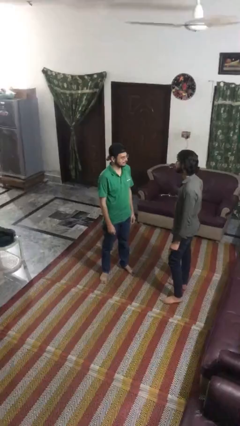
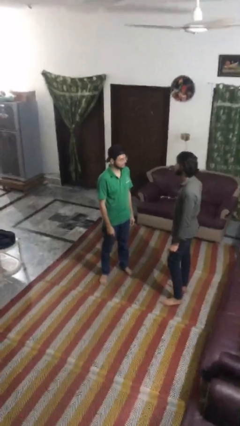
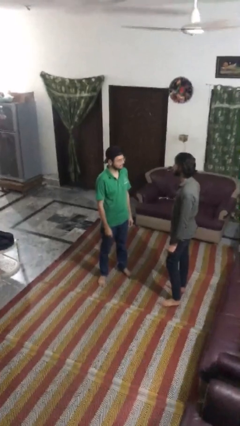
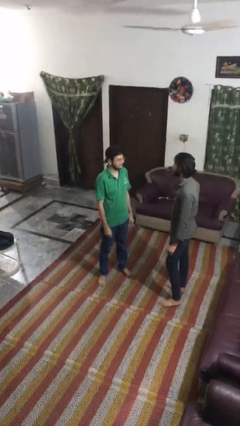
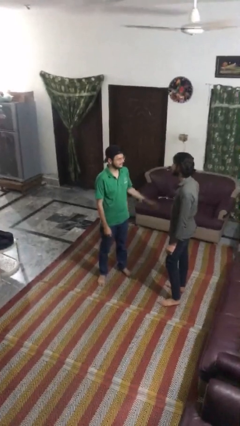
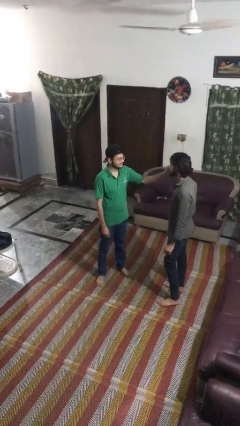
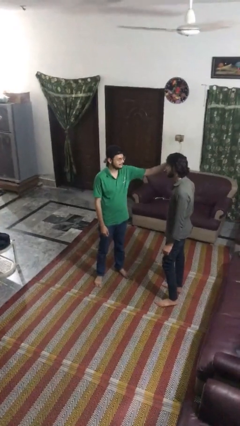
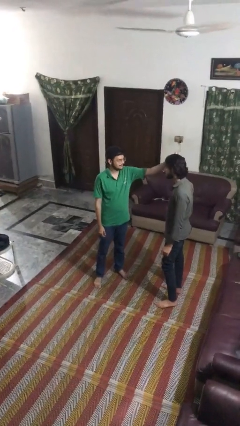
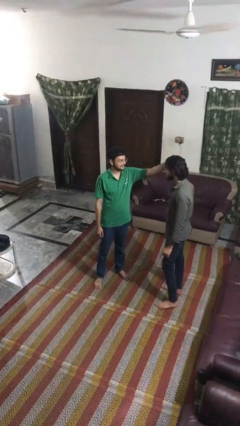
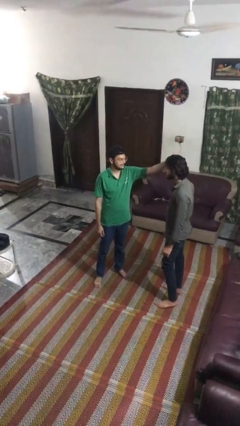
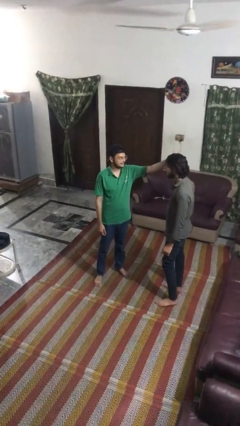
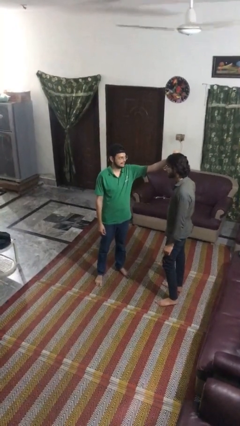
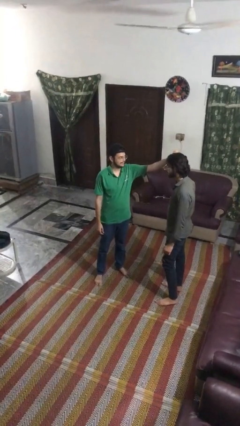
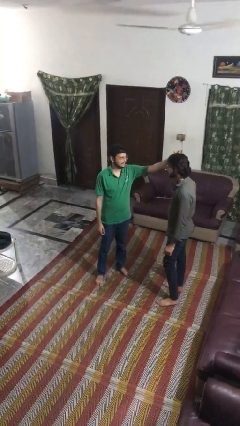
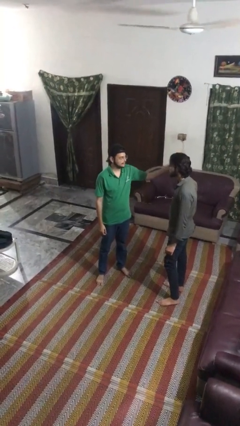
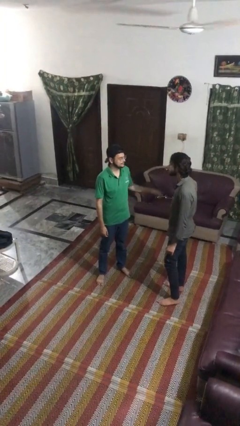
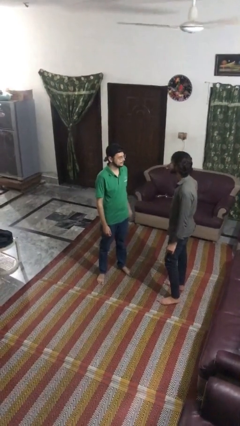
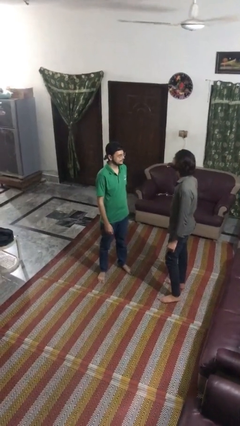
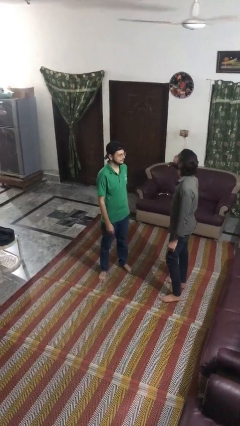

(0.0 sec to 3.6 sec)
person grabs person by hair

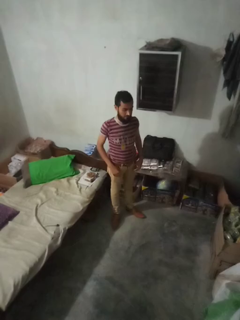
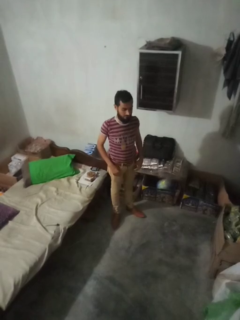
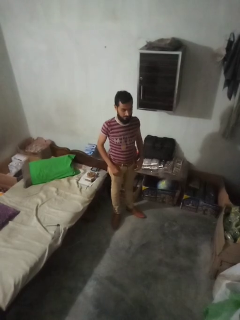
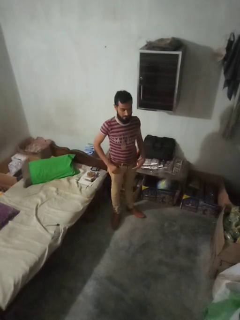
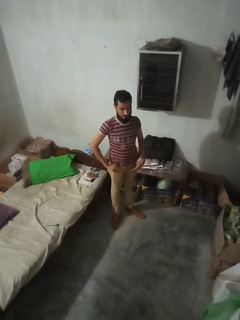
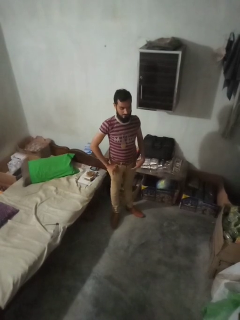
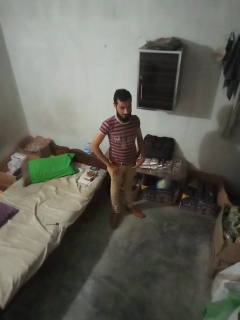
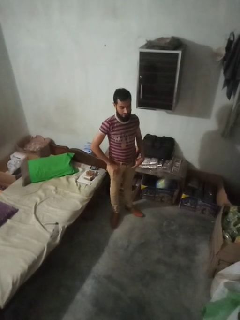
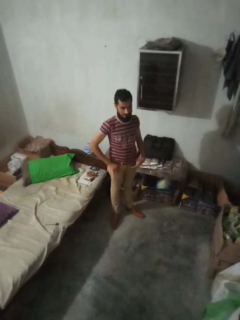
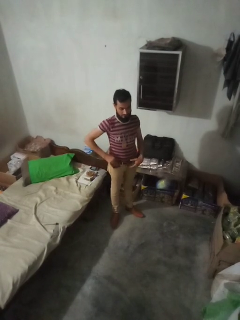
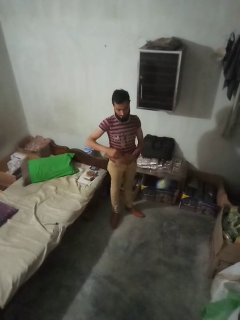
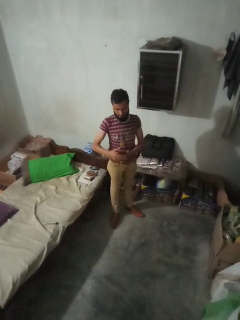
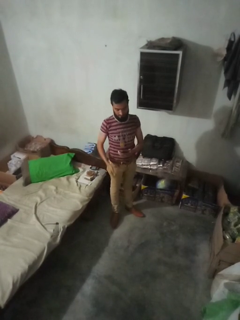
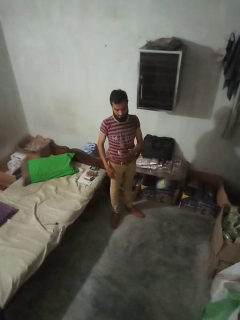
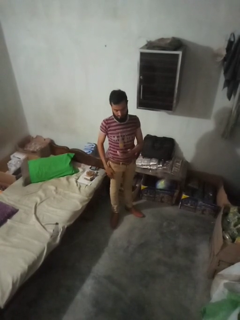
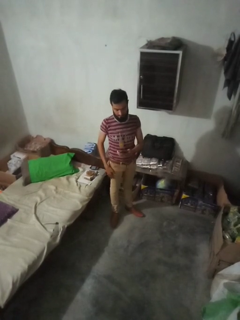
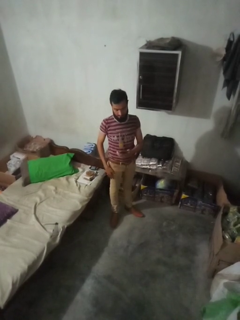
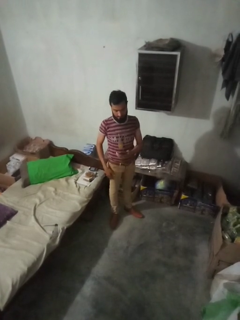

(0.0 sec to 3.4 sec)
person takes phone from pocket

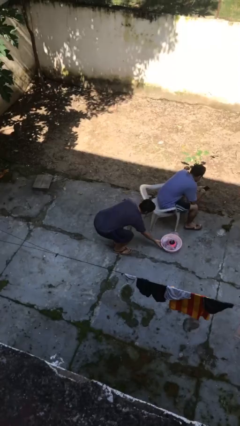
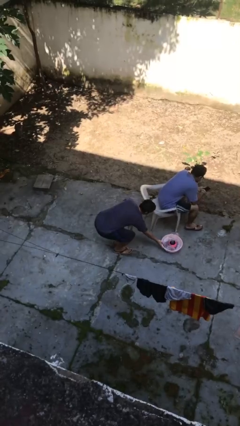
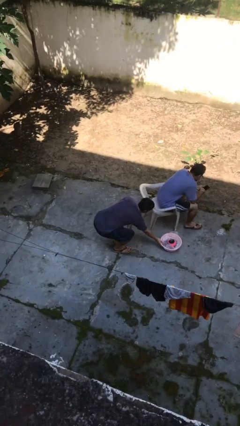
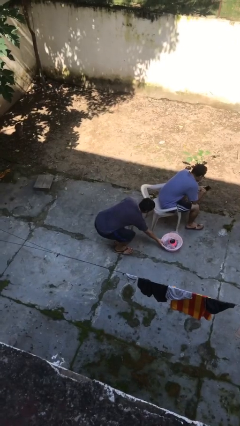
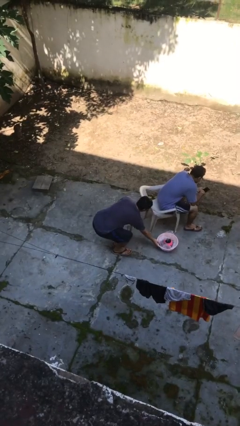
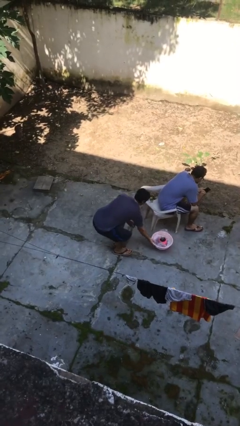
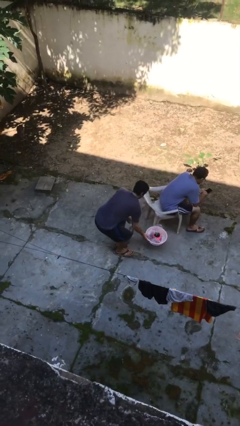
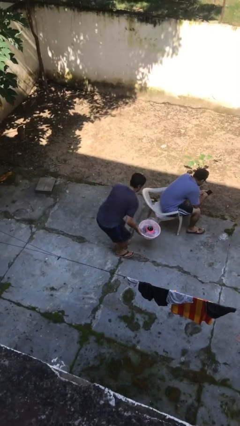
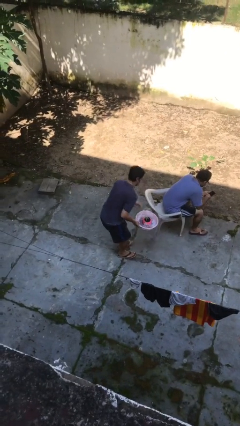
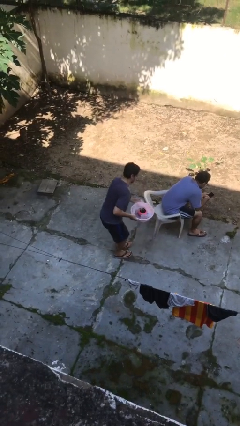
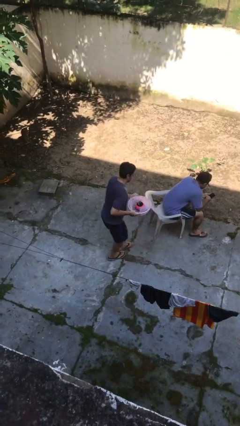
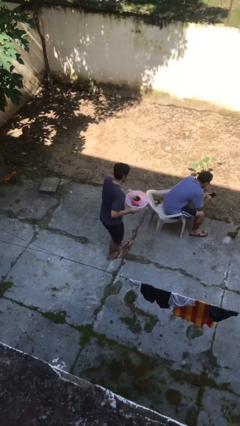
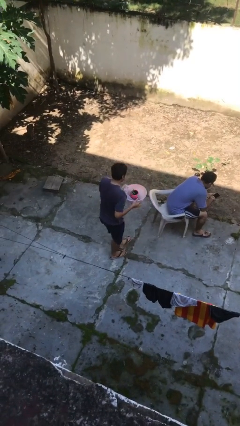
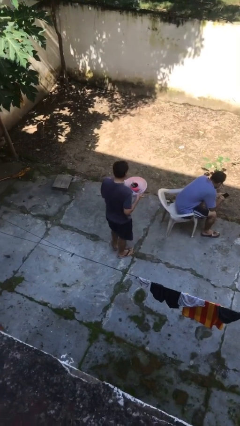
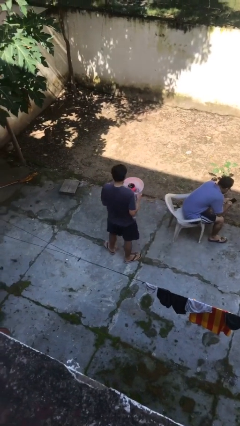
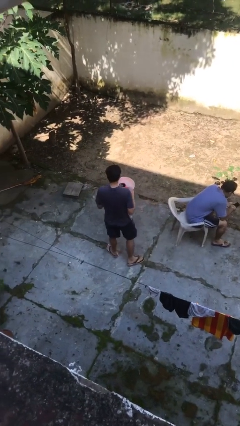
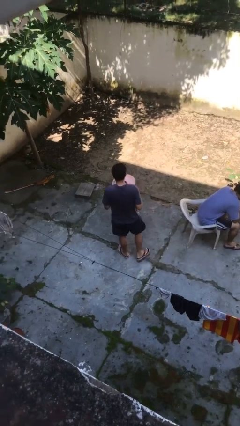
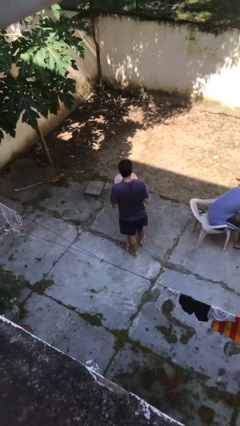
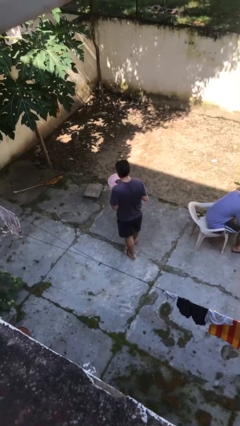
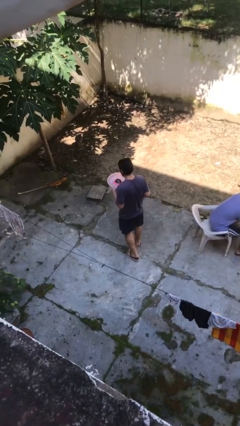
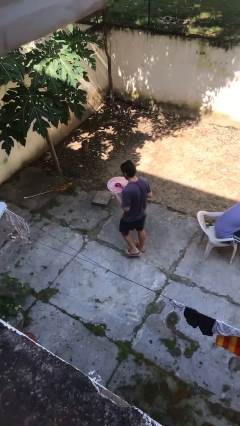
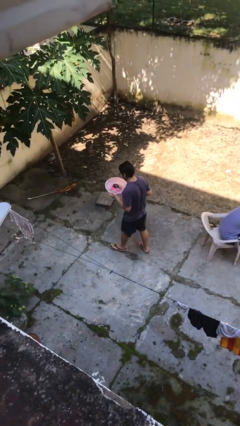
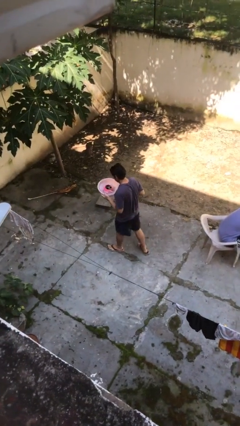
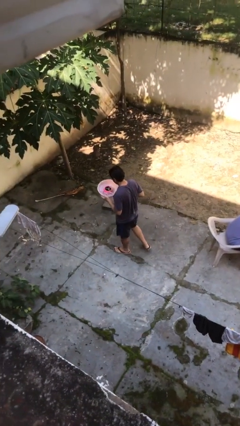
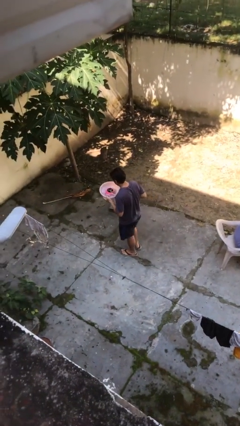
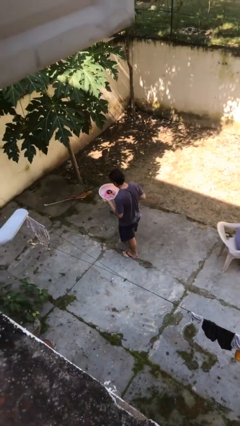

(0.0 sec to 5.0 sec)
person steals object from person

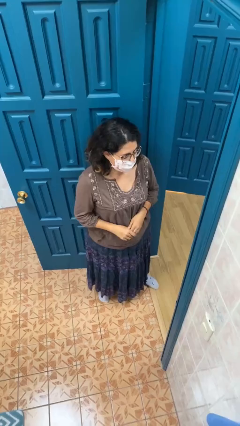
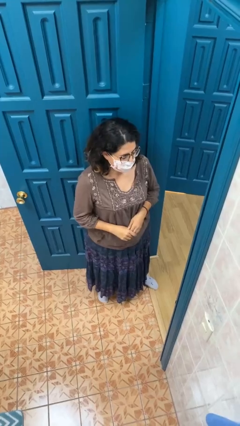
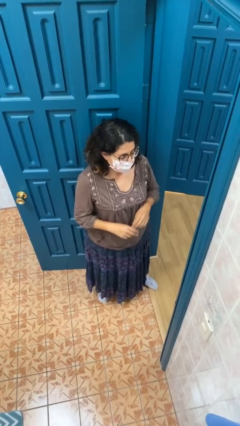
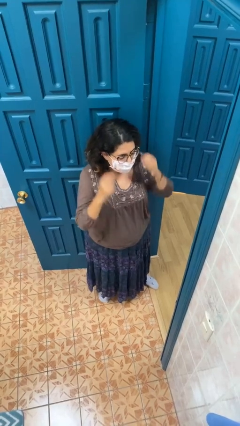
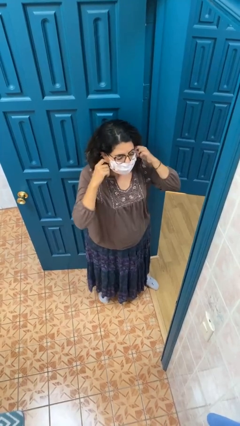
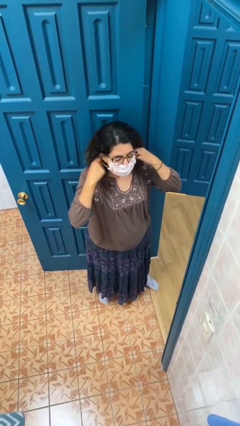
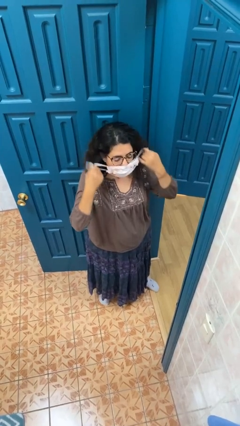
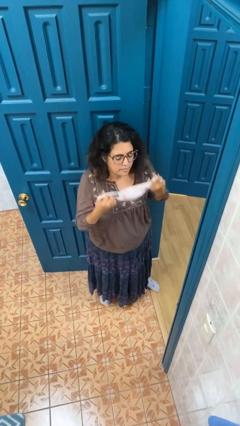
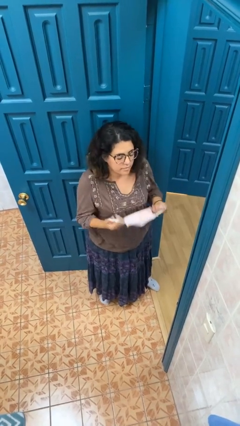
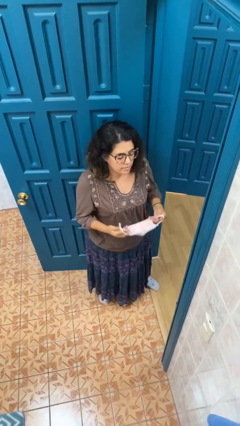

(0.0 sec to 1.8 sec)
person takes off facemask

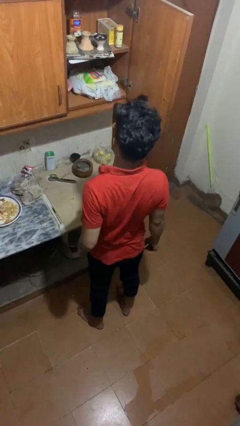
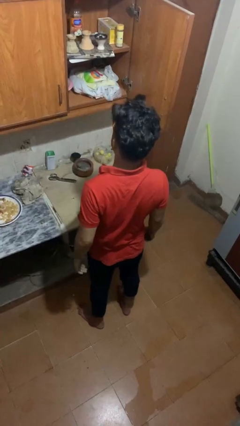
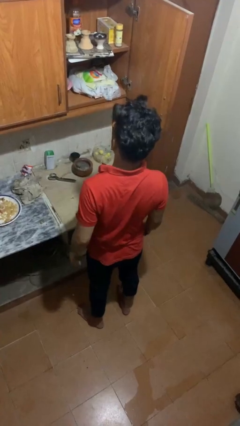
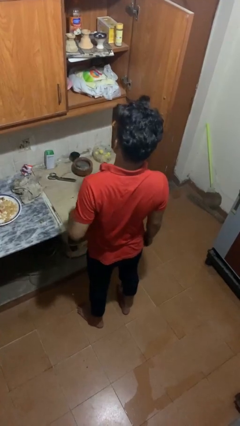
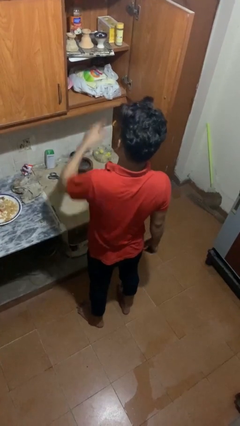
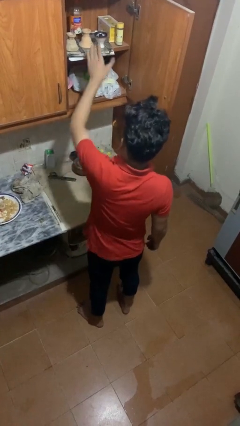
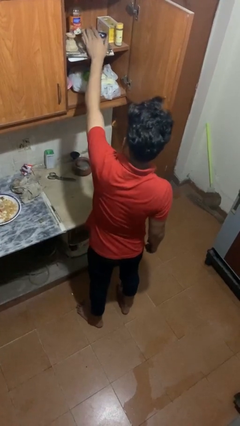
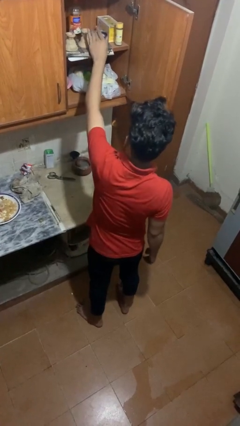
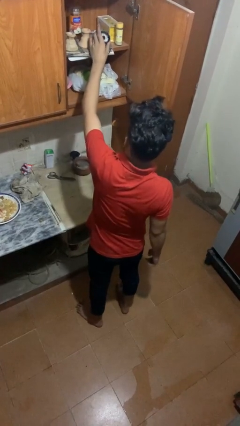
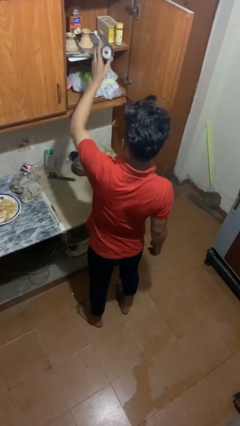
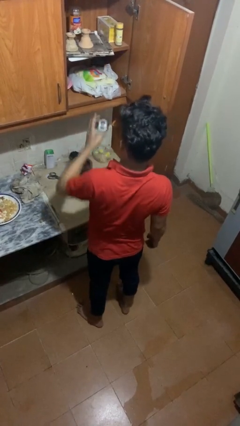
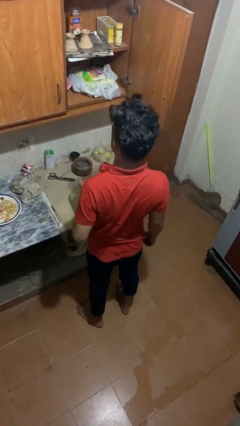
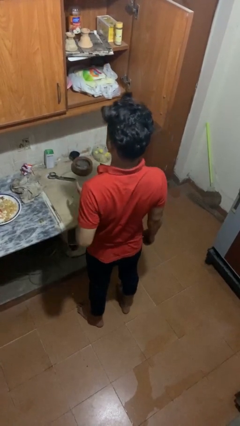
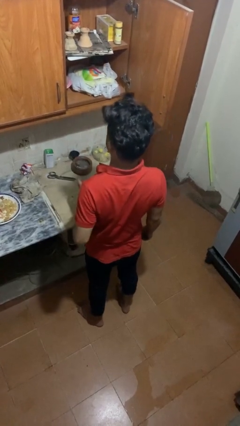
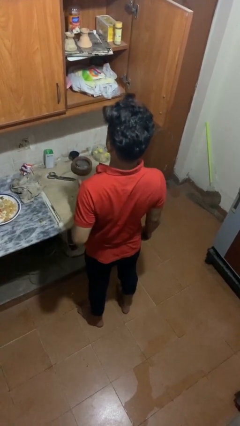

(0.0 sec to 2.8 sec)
person takes object from cabinet

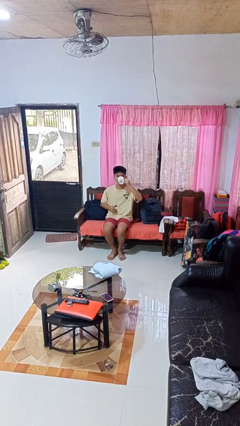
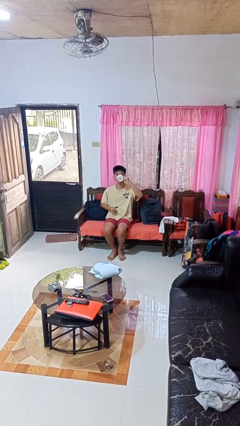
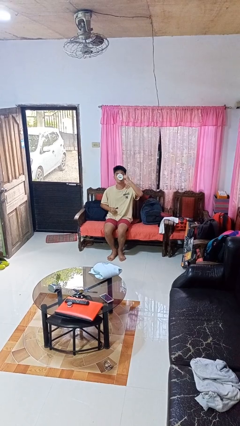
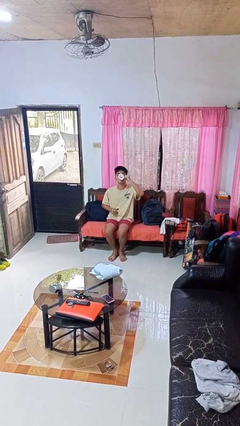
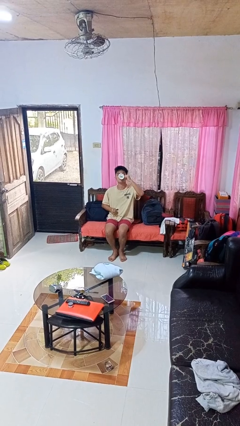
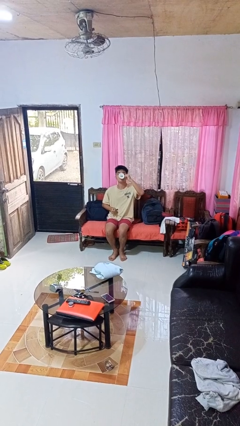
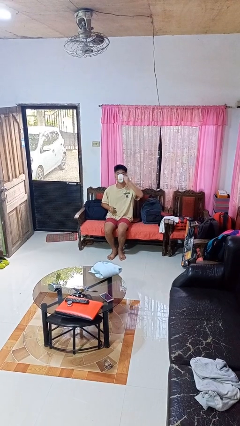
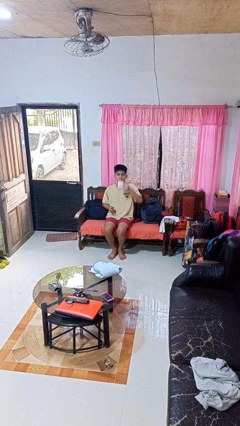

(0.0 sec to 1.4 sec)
person drinks from mug

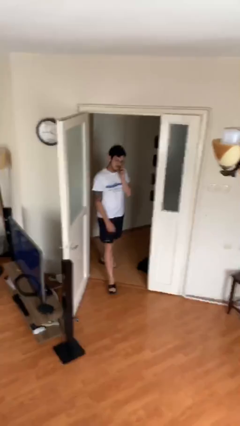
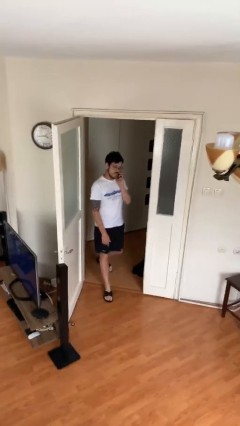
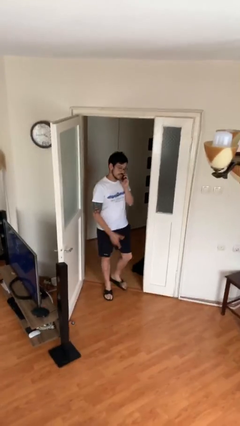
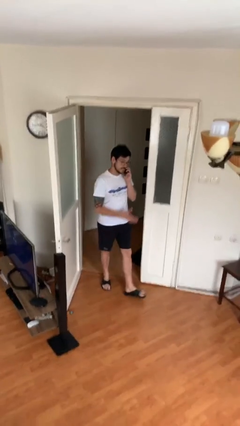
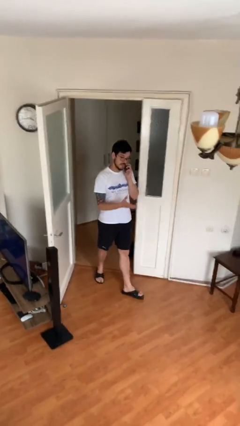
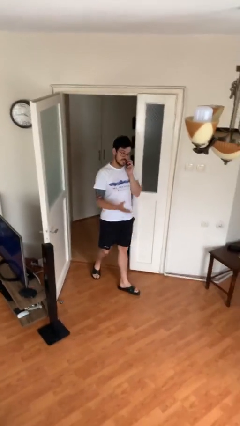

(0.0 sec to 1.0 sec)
person enters scene through structure
